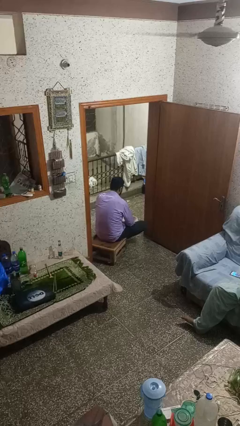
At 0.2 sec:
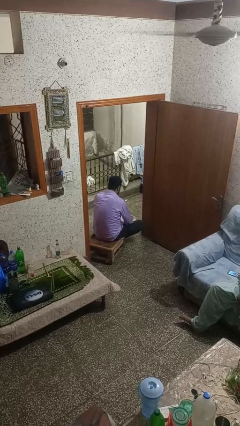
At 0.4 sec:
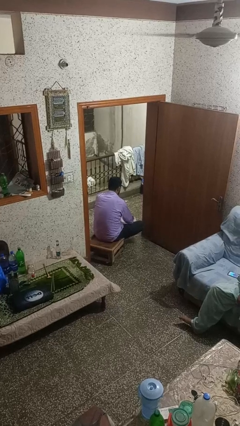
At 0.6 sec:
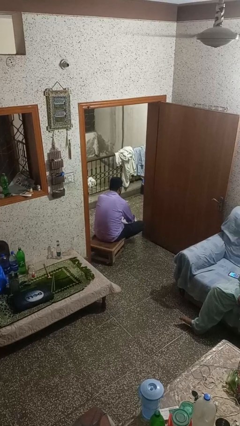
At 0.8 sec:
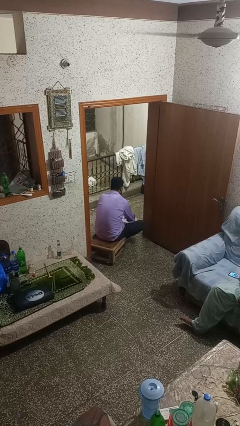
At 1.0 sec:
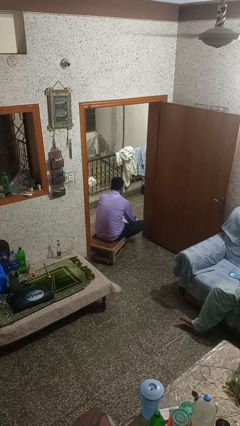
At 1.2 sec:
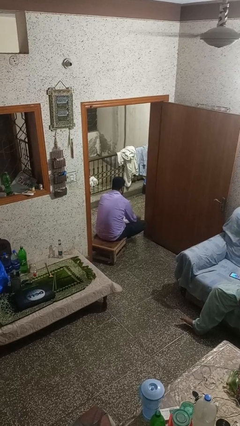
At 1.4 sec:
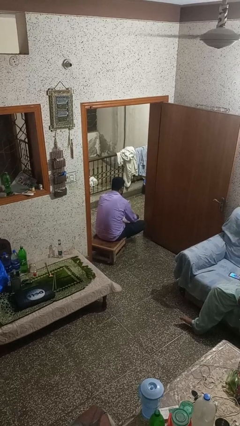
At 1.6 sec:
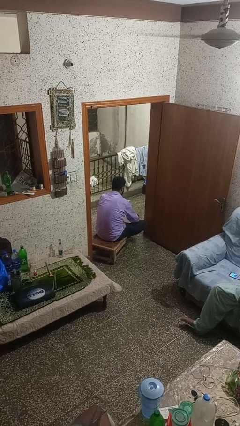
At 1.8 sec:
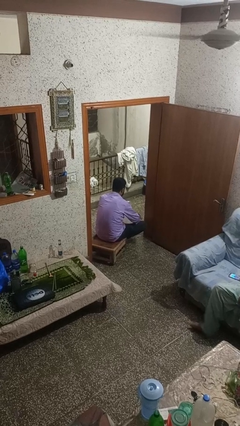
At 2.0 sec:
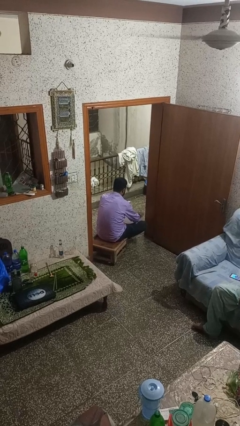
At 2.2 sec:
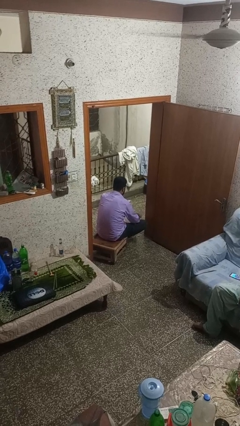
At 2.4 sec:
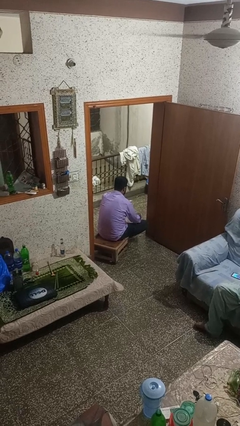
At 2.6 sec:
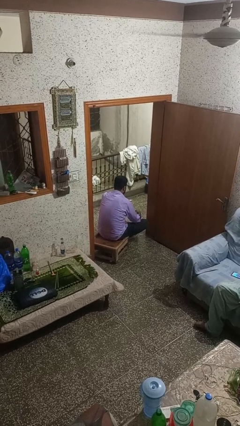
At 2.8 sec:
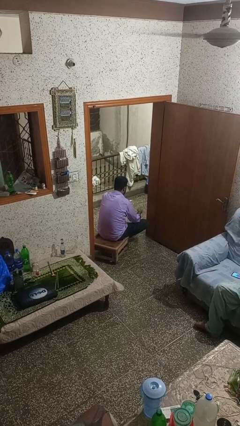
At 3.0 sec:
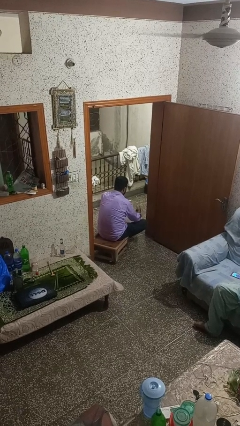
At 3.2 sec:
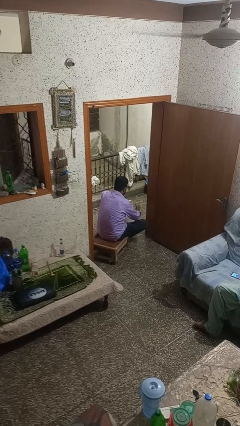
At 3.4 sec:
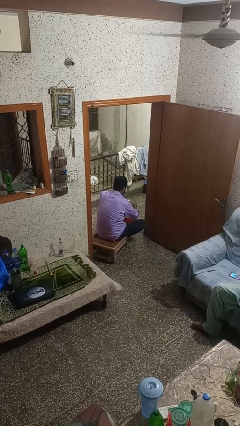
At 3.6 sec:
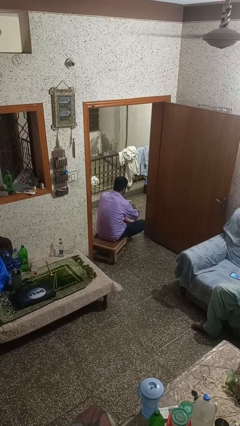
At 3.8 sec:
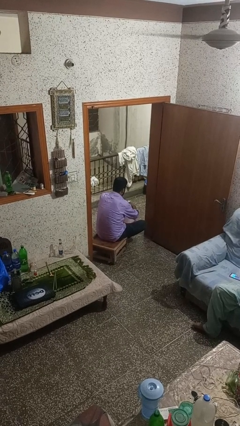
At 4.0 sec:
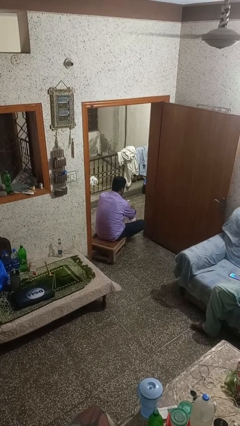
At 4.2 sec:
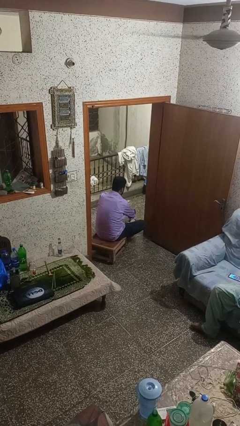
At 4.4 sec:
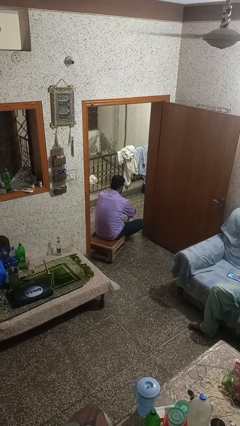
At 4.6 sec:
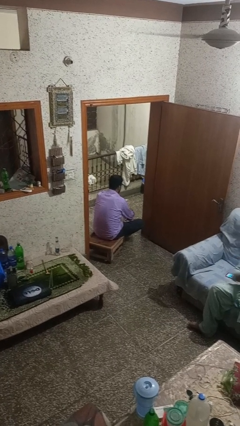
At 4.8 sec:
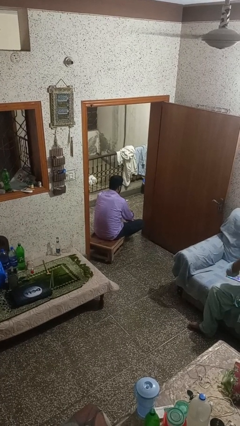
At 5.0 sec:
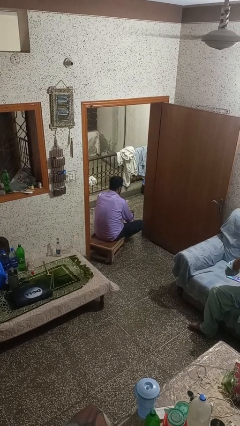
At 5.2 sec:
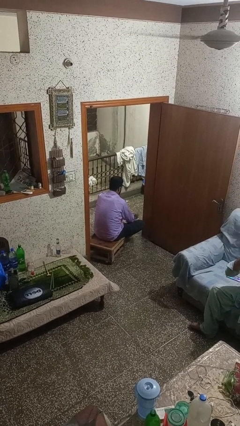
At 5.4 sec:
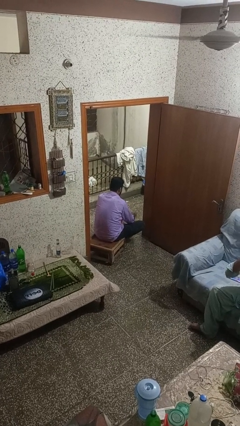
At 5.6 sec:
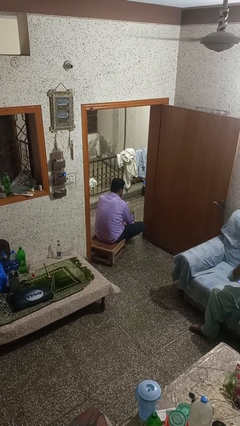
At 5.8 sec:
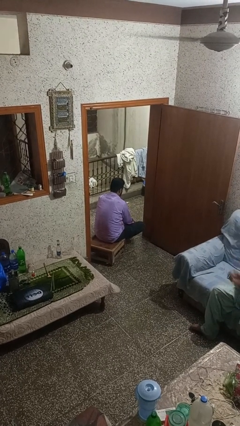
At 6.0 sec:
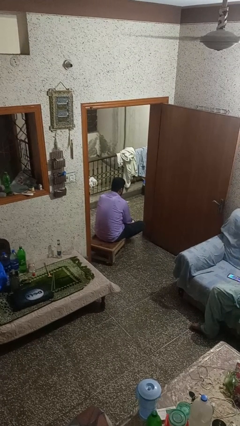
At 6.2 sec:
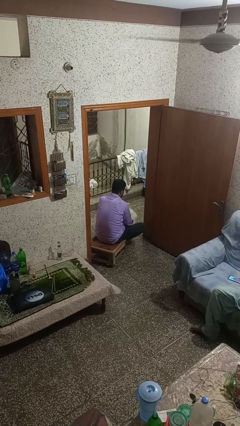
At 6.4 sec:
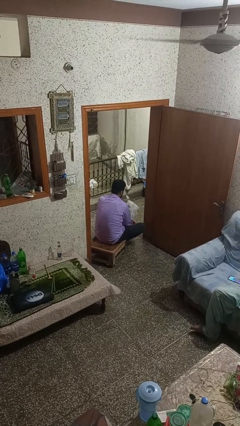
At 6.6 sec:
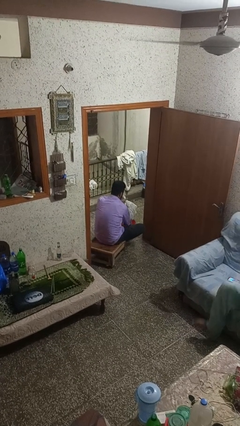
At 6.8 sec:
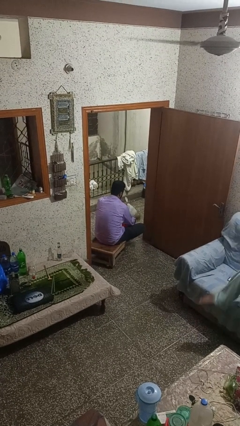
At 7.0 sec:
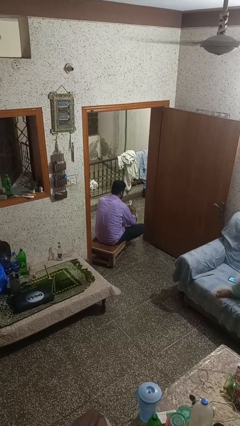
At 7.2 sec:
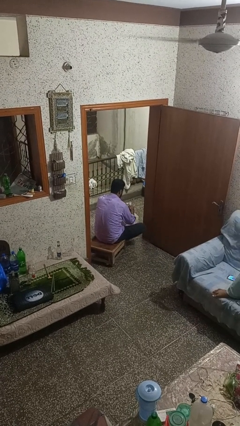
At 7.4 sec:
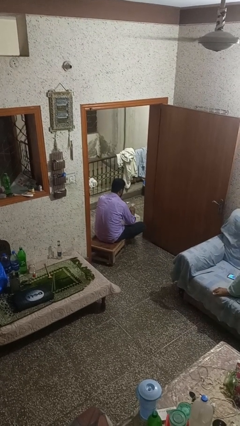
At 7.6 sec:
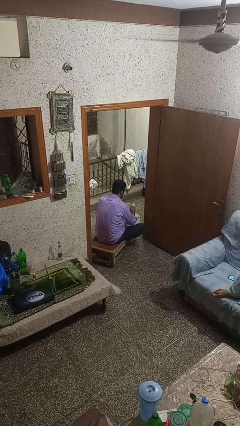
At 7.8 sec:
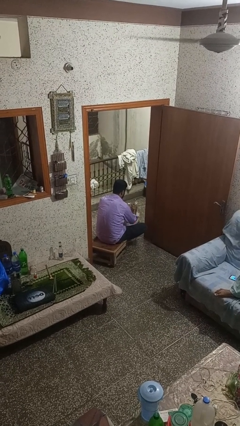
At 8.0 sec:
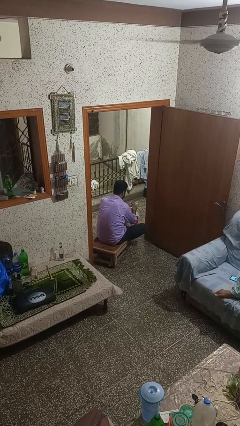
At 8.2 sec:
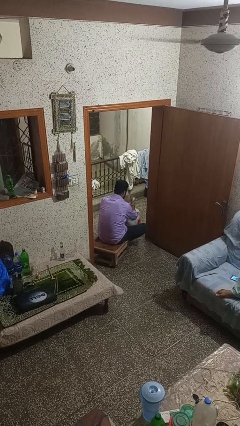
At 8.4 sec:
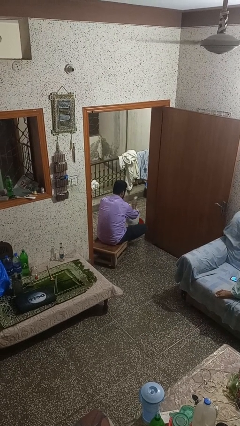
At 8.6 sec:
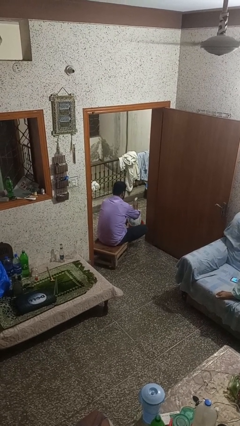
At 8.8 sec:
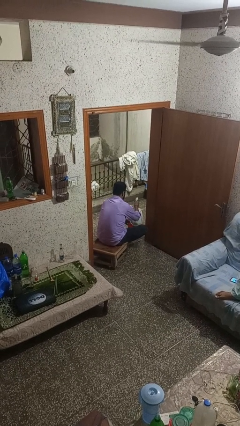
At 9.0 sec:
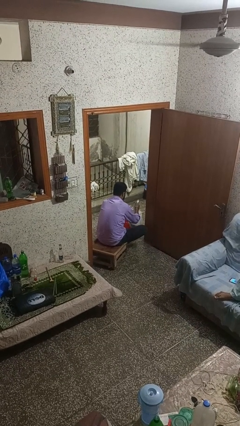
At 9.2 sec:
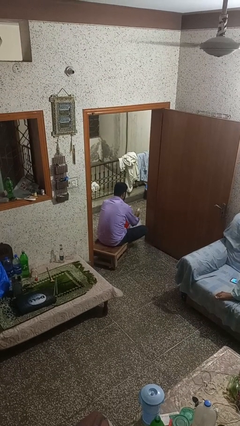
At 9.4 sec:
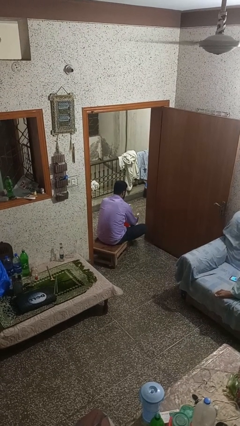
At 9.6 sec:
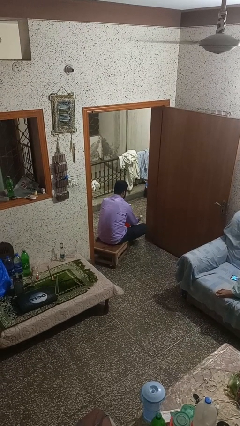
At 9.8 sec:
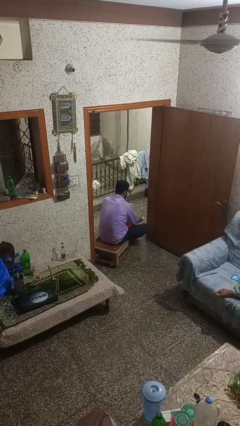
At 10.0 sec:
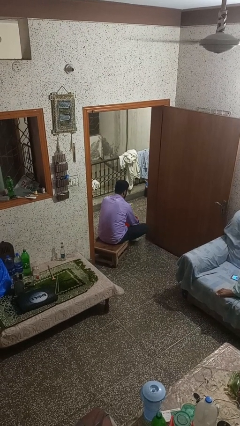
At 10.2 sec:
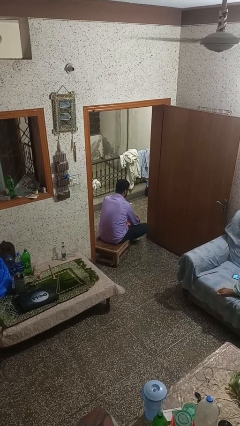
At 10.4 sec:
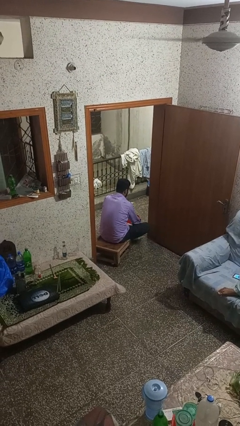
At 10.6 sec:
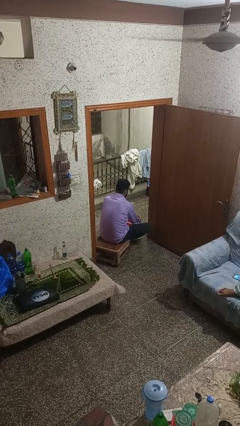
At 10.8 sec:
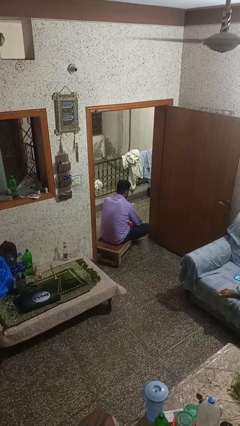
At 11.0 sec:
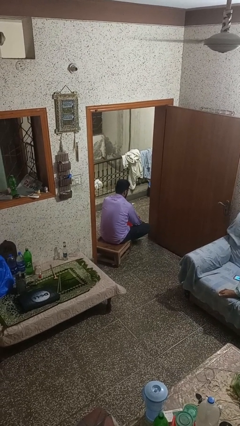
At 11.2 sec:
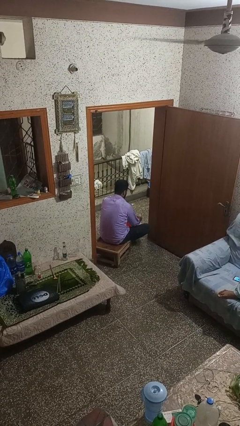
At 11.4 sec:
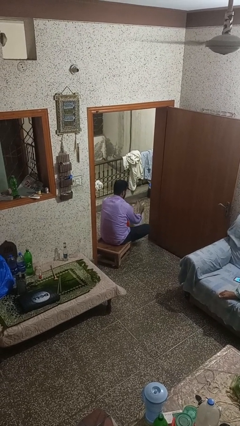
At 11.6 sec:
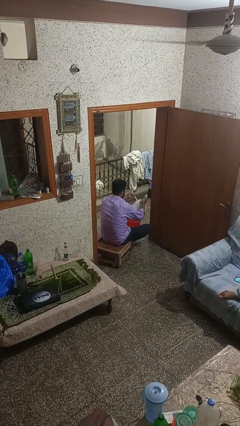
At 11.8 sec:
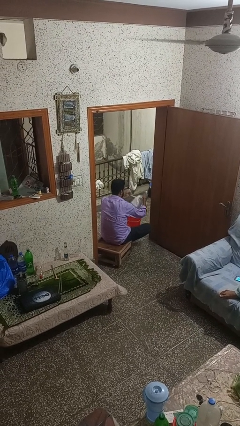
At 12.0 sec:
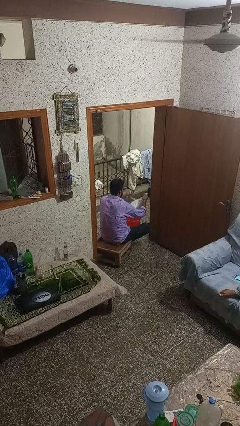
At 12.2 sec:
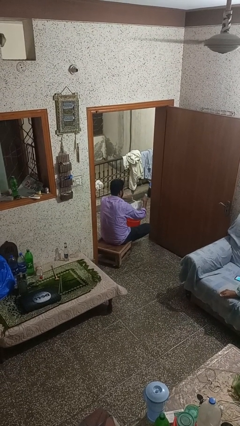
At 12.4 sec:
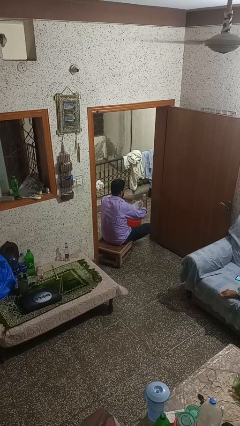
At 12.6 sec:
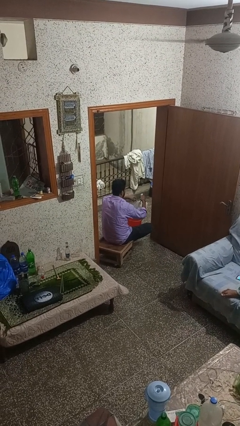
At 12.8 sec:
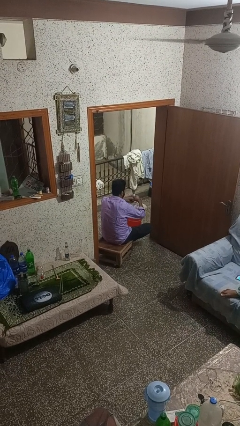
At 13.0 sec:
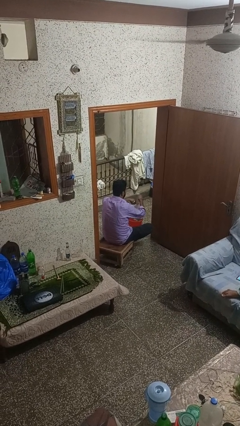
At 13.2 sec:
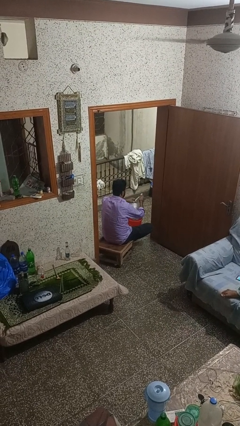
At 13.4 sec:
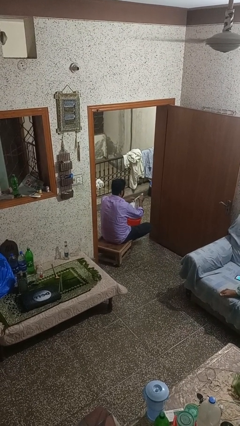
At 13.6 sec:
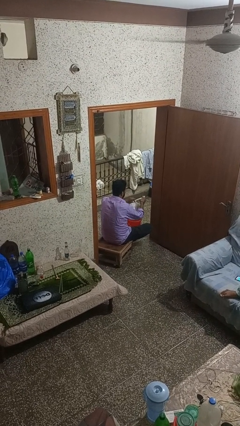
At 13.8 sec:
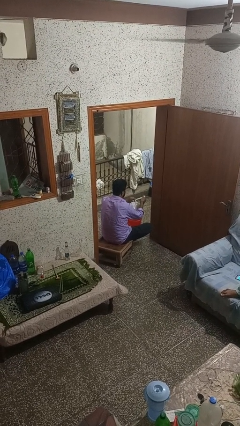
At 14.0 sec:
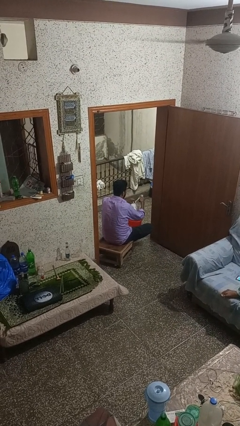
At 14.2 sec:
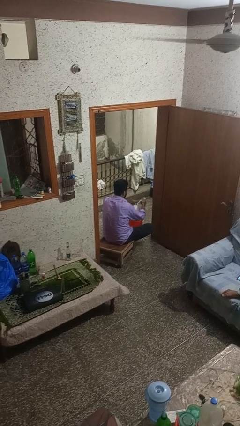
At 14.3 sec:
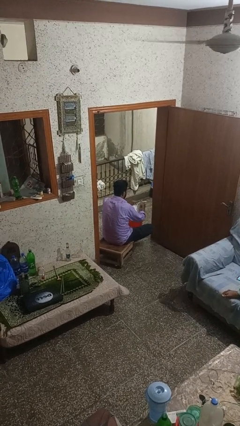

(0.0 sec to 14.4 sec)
person removes trashbag from trashcan

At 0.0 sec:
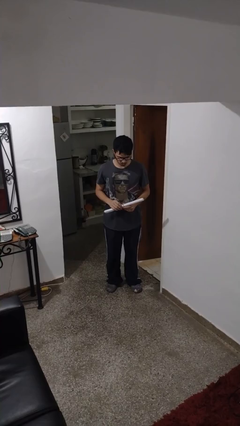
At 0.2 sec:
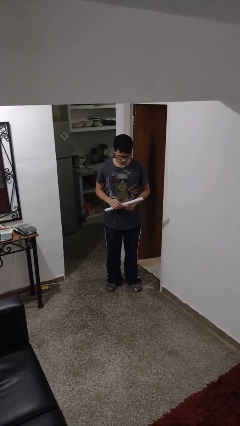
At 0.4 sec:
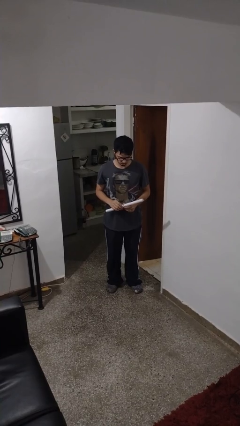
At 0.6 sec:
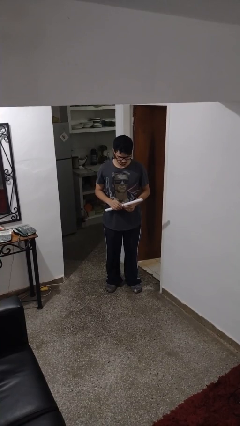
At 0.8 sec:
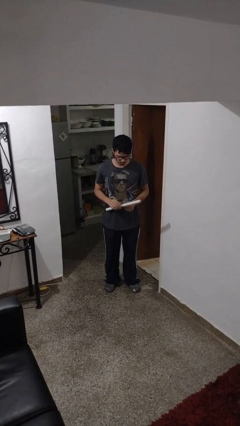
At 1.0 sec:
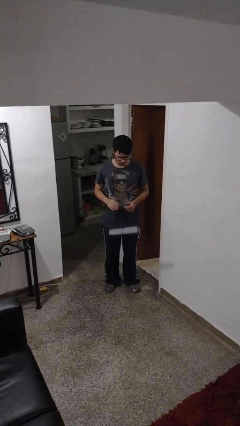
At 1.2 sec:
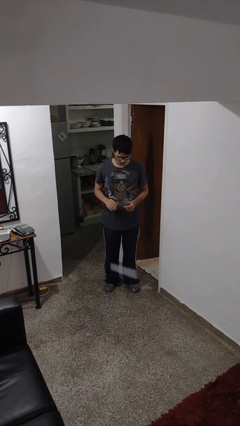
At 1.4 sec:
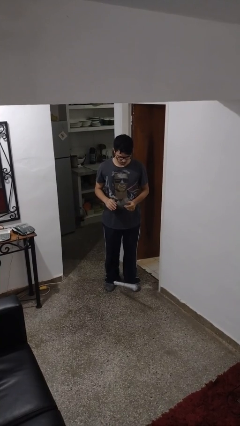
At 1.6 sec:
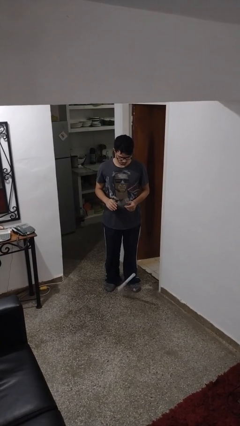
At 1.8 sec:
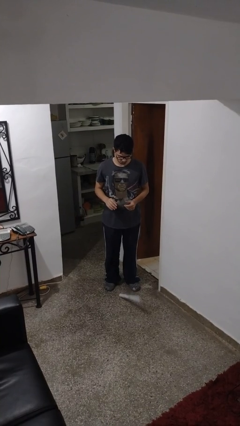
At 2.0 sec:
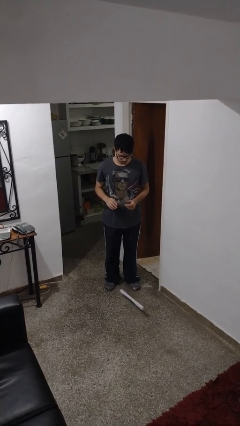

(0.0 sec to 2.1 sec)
person drops object

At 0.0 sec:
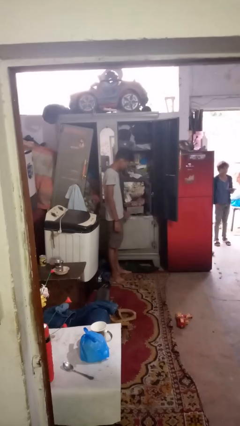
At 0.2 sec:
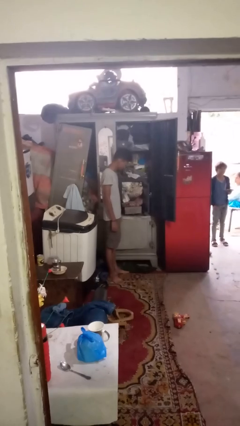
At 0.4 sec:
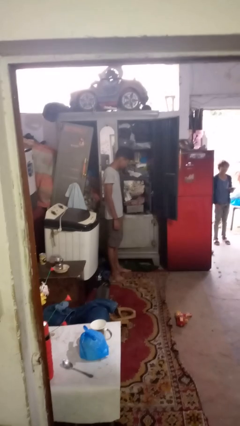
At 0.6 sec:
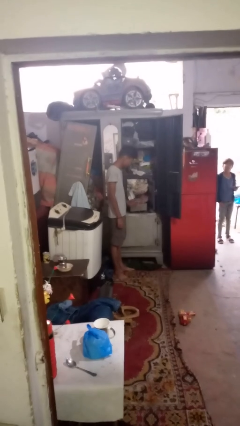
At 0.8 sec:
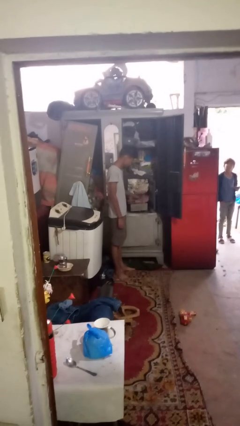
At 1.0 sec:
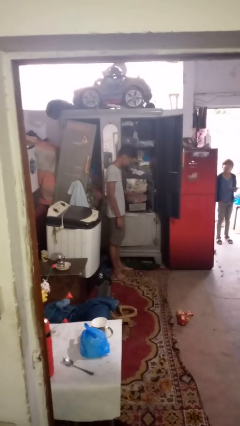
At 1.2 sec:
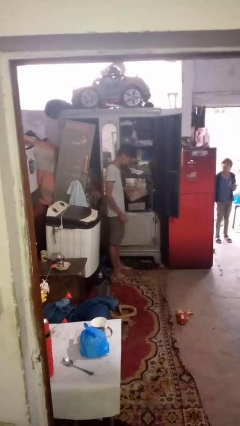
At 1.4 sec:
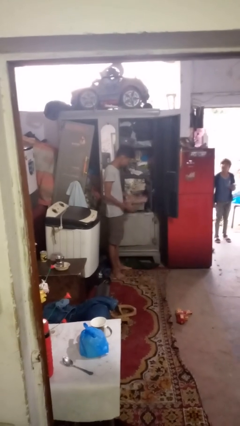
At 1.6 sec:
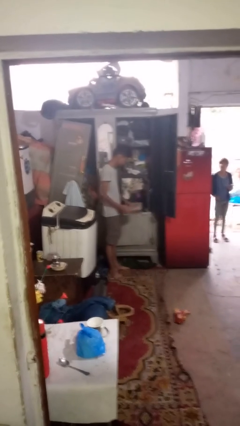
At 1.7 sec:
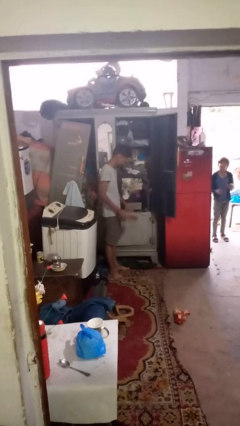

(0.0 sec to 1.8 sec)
person takes clothes from dresser
